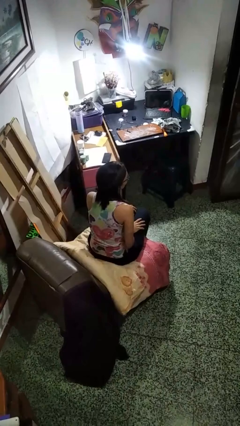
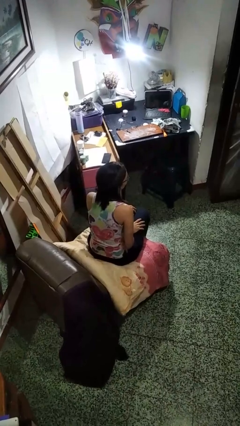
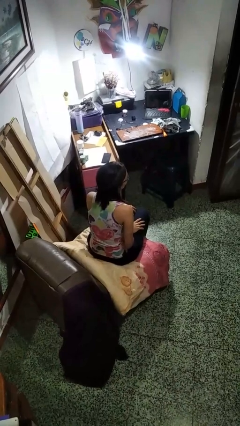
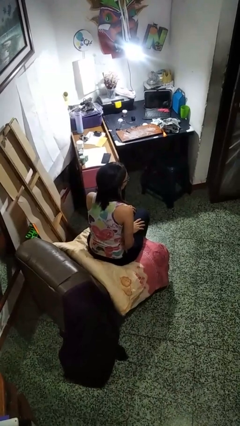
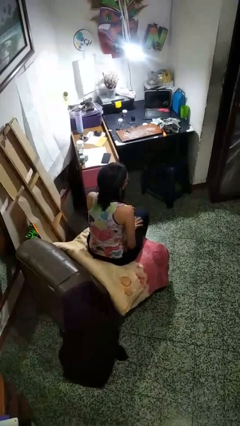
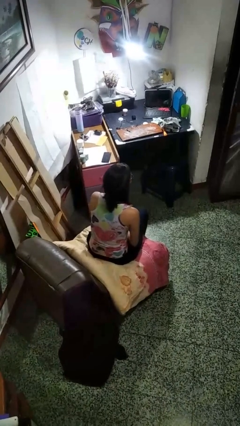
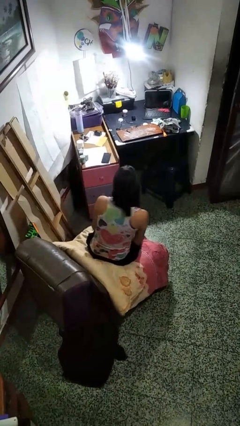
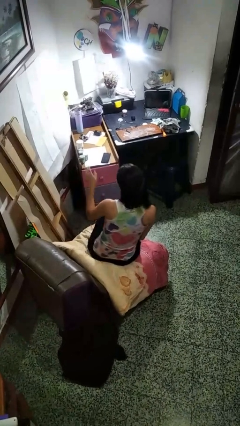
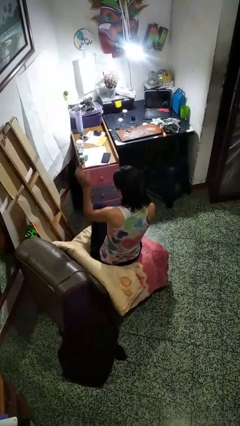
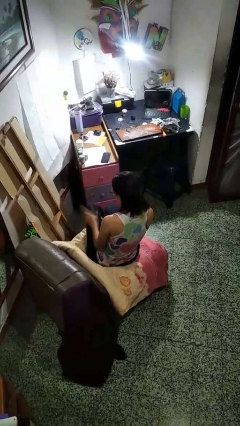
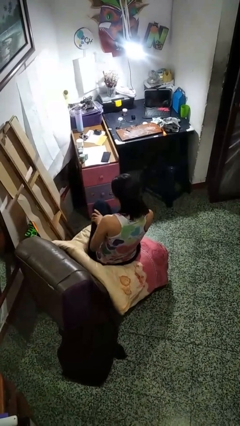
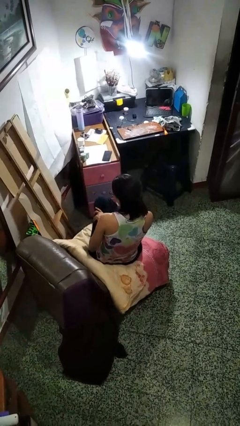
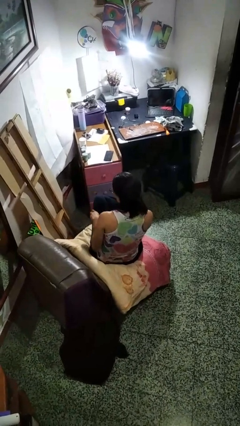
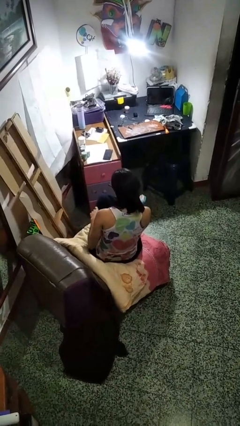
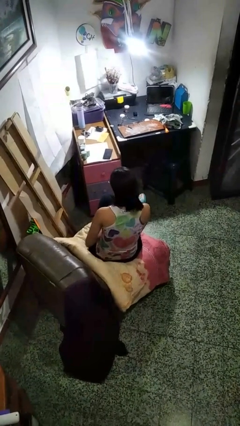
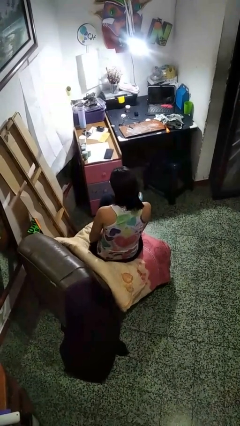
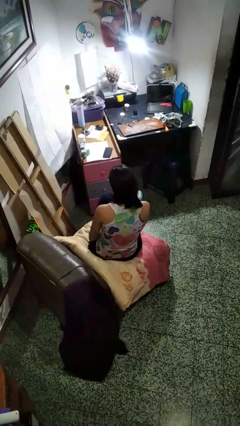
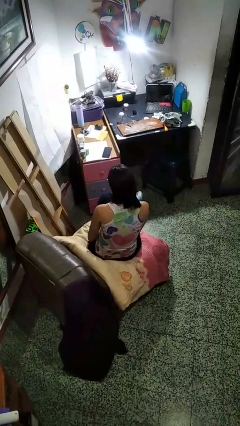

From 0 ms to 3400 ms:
person slaps hands on thighs

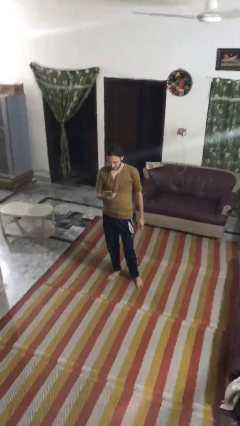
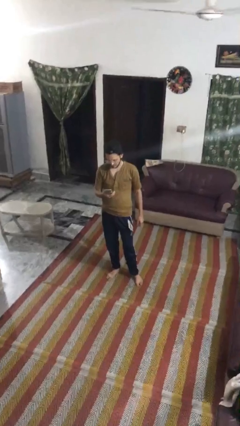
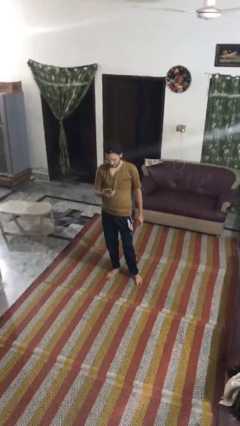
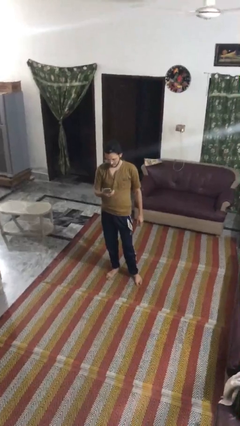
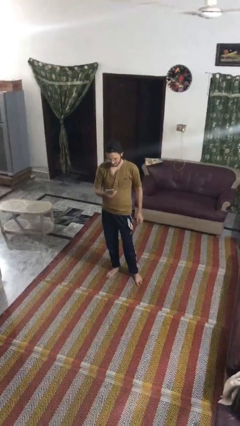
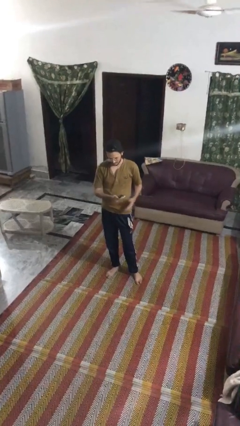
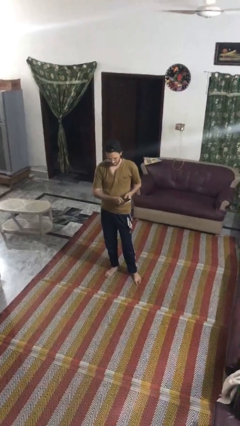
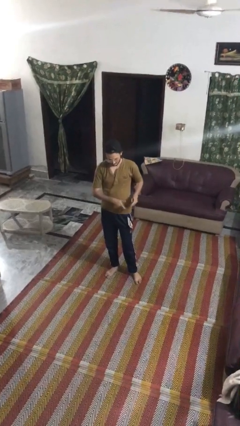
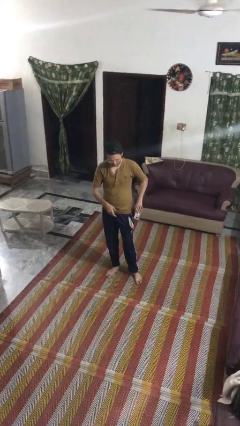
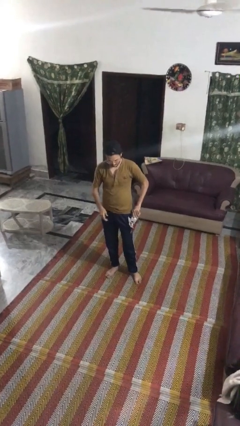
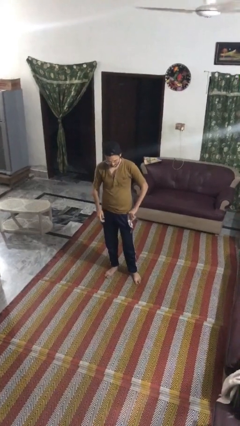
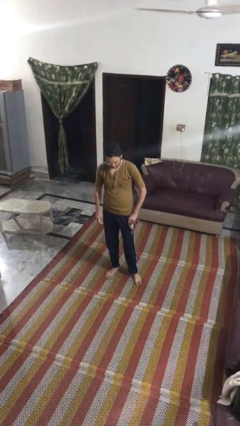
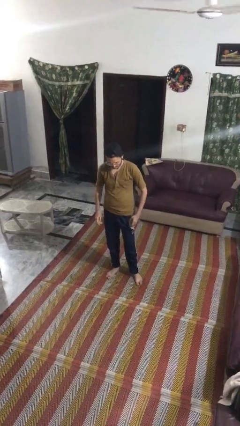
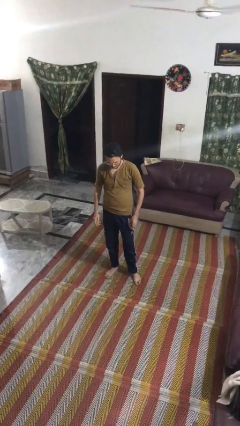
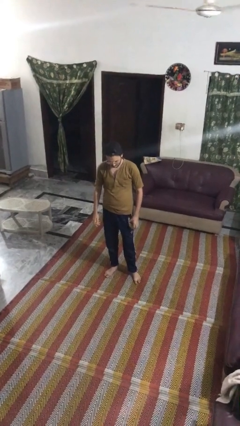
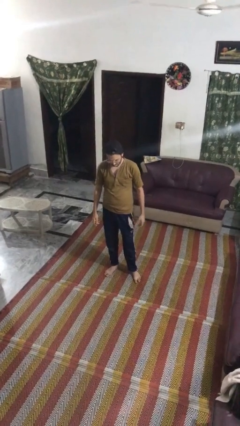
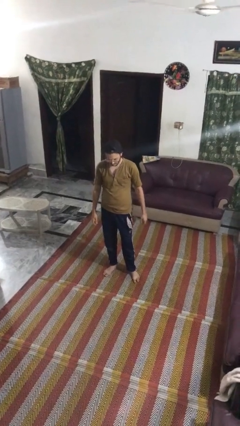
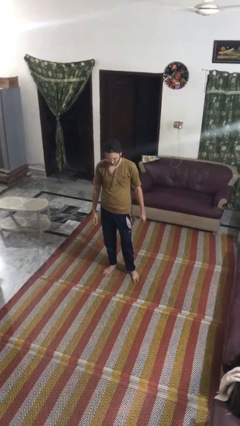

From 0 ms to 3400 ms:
person puts phone into pocket

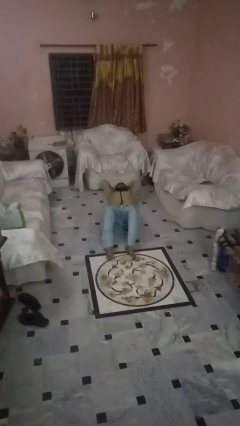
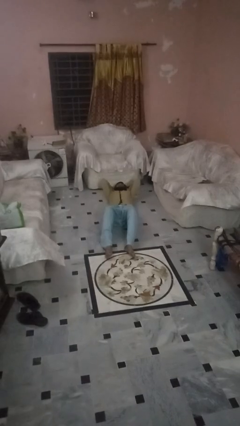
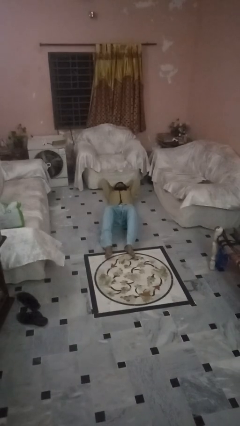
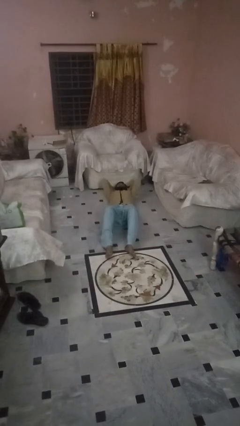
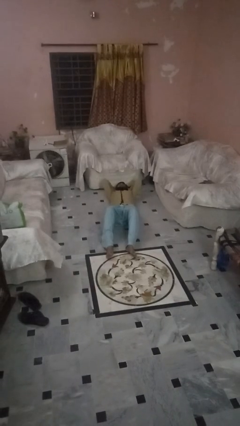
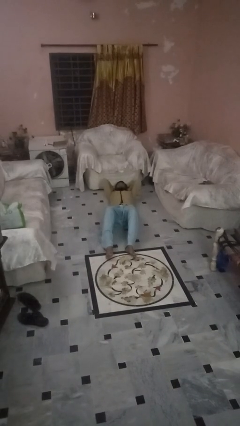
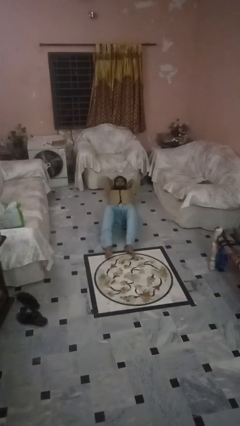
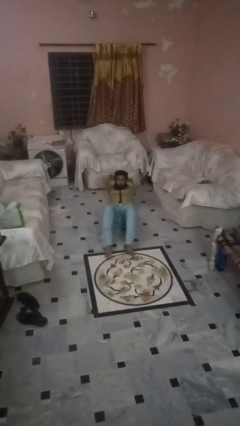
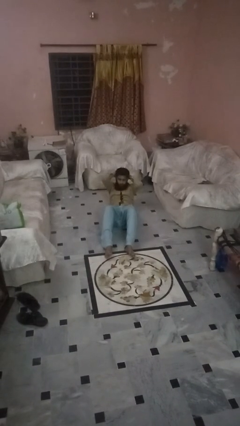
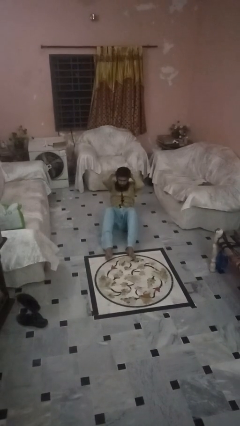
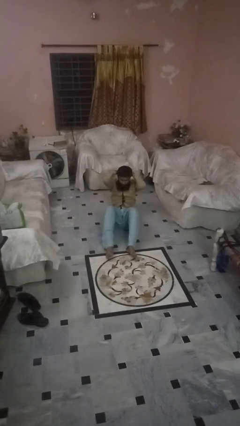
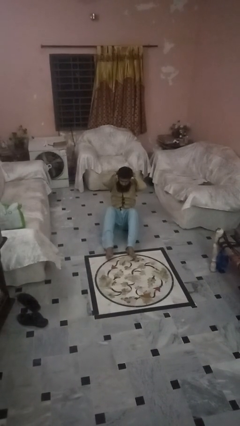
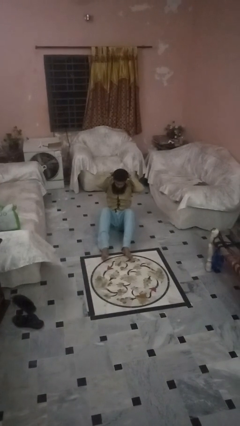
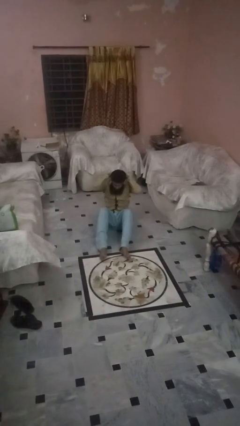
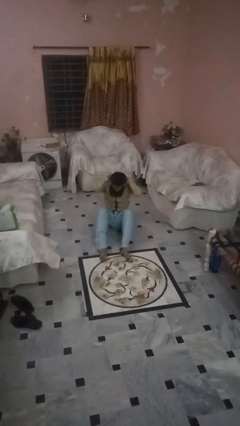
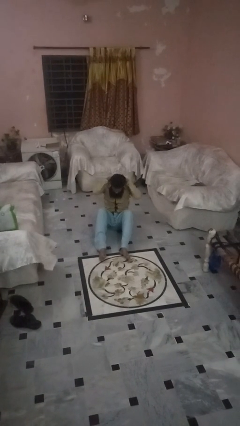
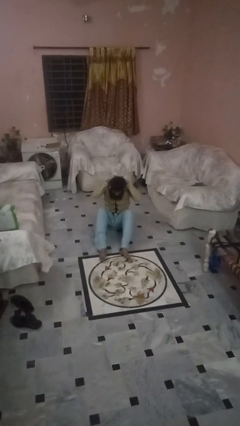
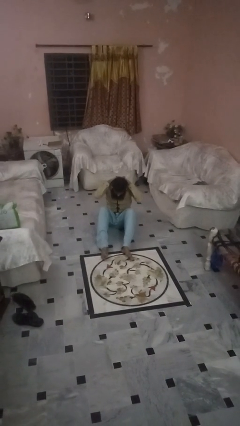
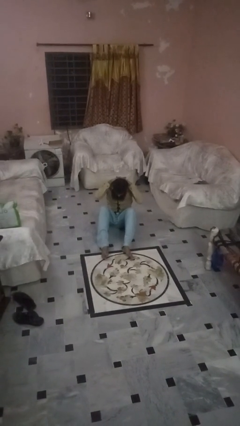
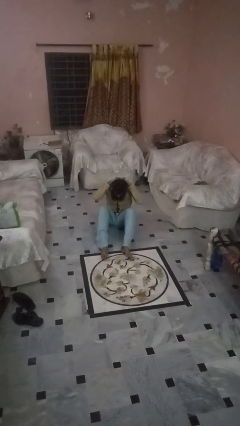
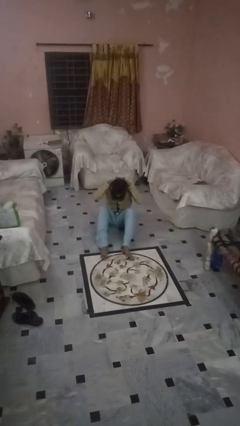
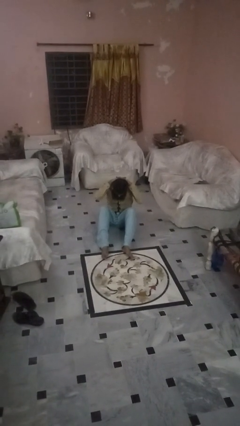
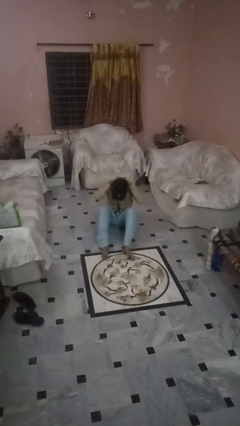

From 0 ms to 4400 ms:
person exercises with situp

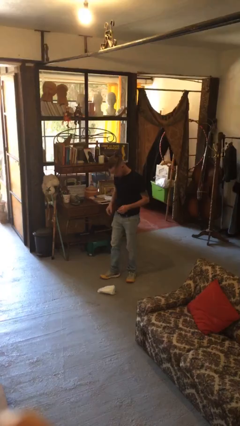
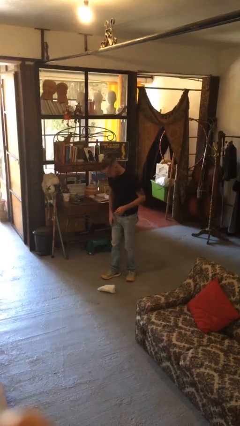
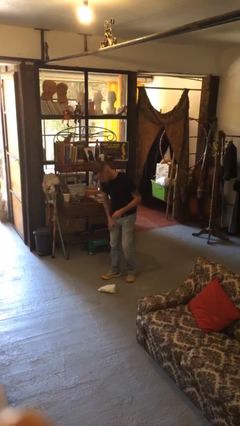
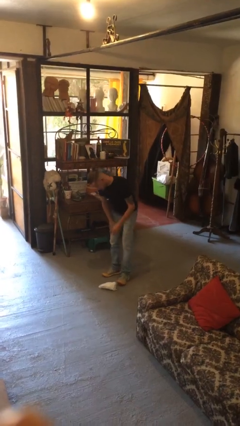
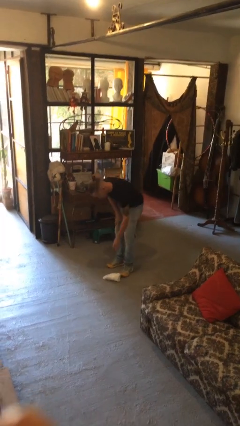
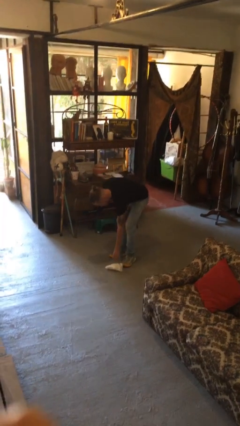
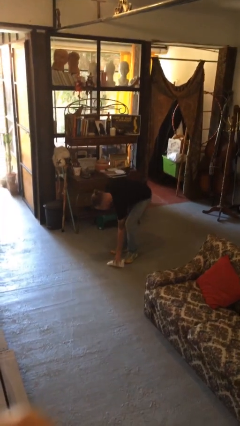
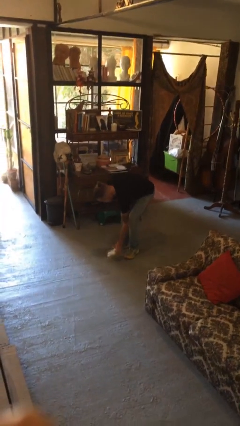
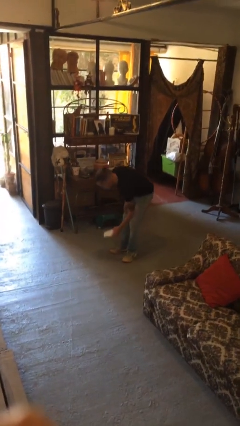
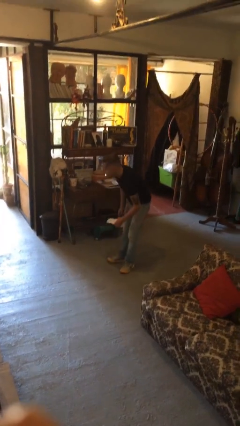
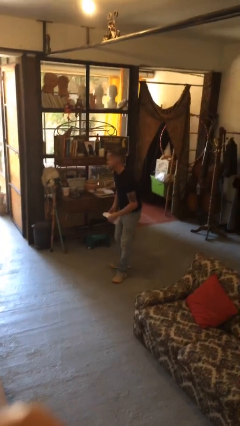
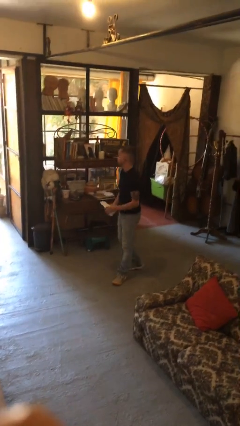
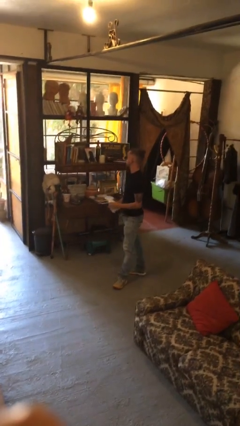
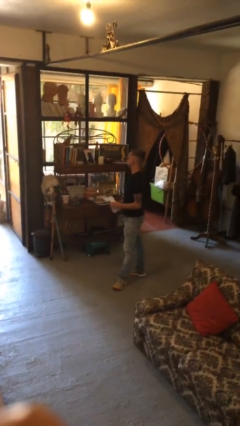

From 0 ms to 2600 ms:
person picks up object from floor

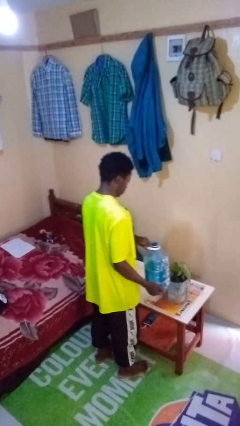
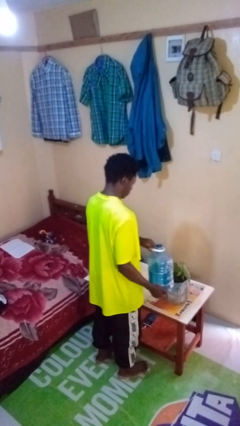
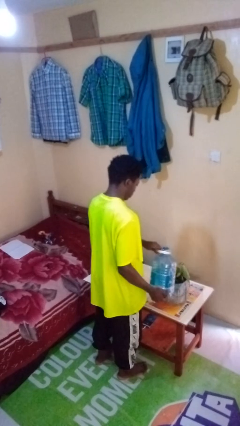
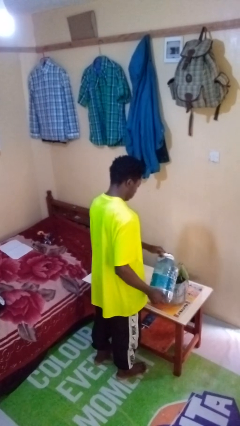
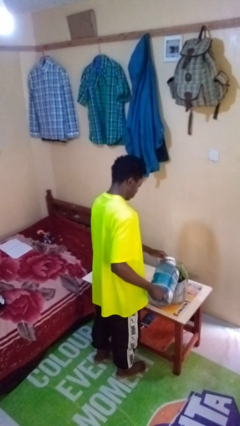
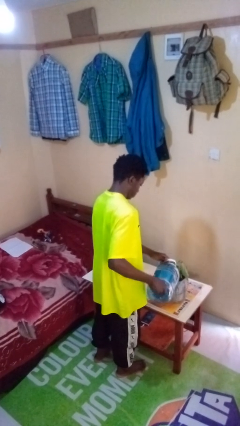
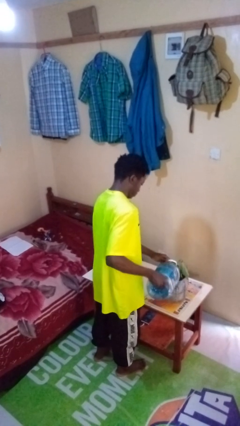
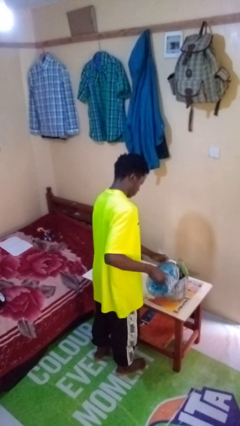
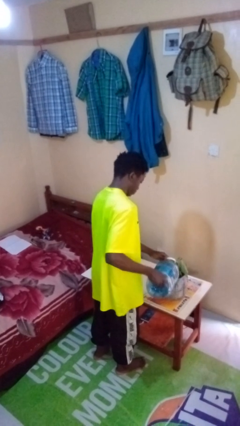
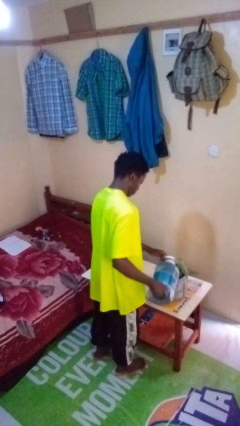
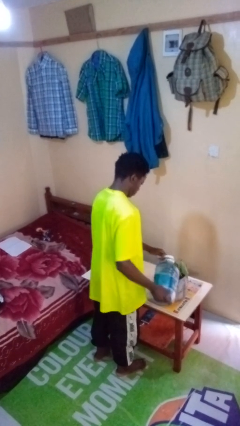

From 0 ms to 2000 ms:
person waters houseplant

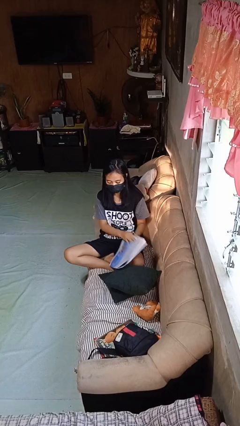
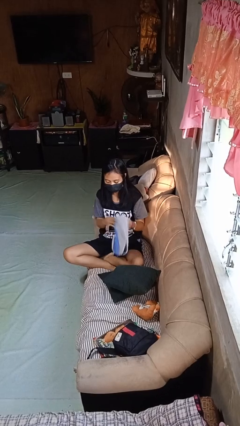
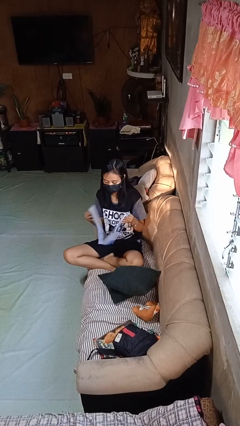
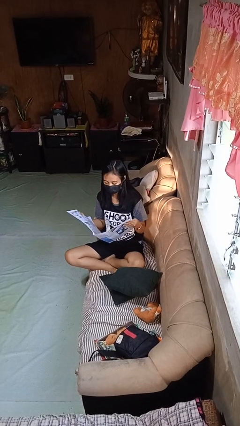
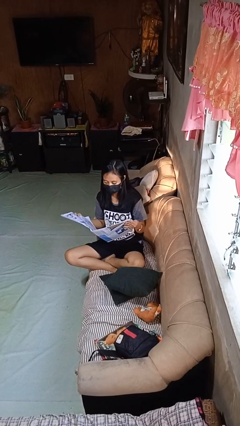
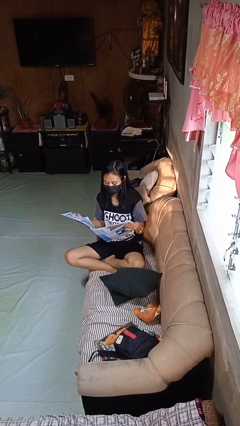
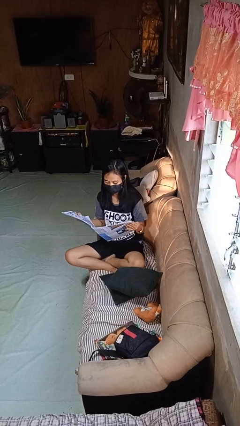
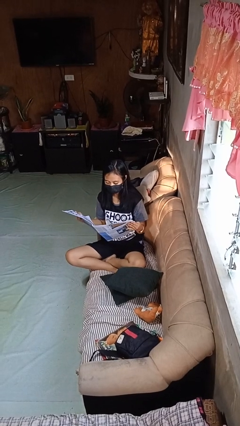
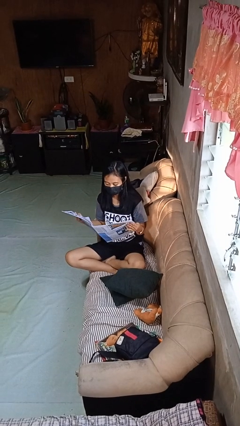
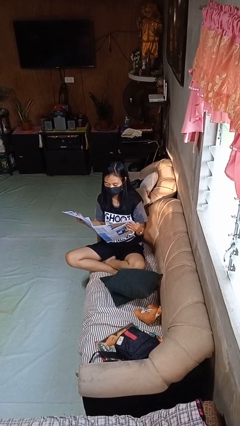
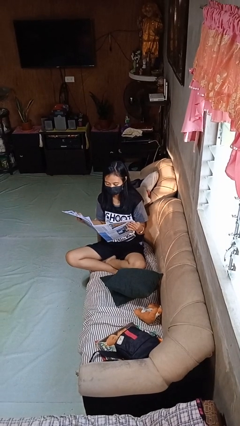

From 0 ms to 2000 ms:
person reads newspaper
